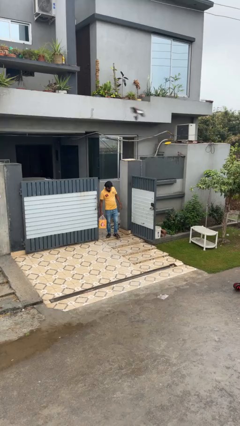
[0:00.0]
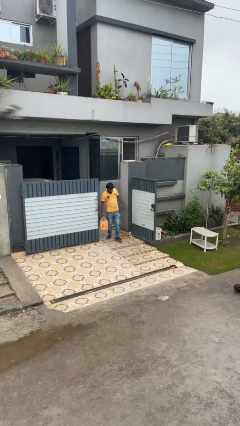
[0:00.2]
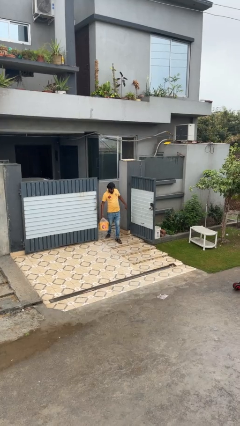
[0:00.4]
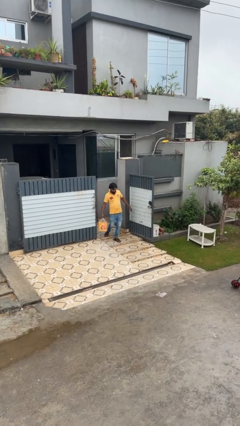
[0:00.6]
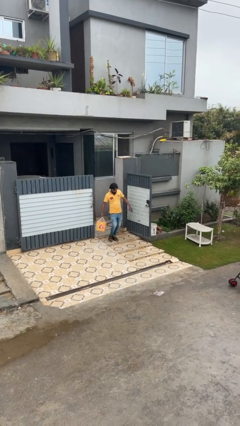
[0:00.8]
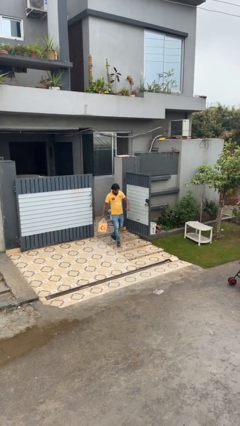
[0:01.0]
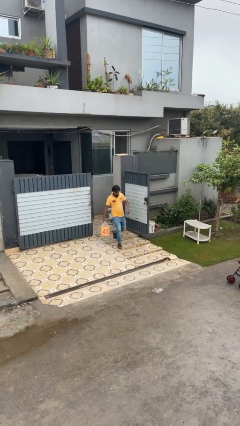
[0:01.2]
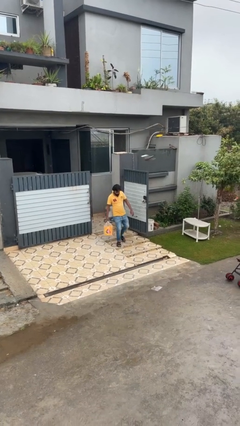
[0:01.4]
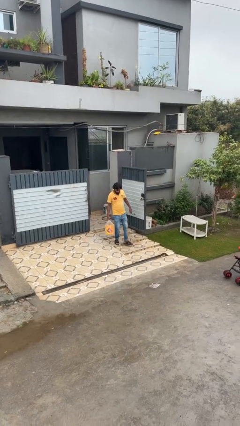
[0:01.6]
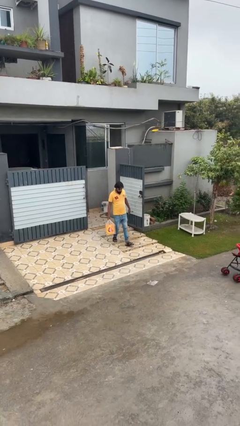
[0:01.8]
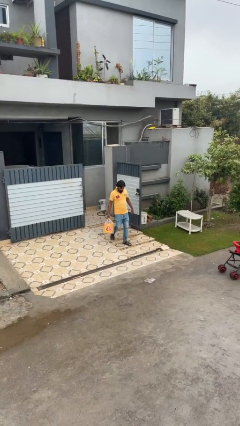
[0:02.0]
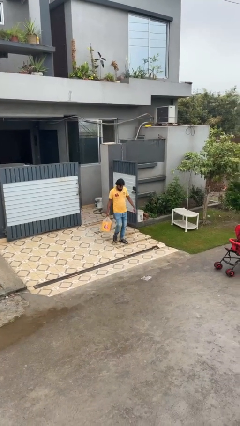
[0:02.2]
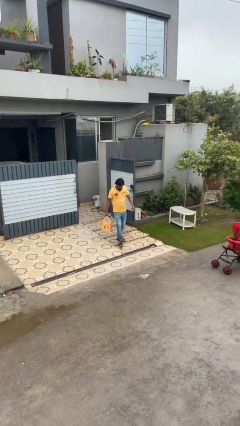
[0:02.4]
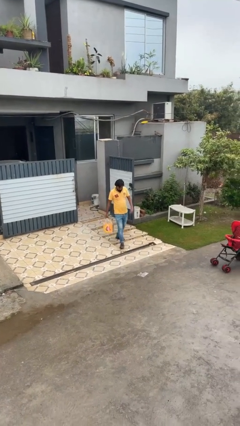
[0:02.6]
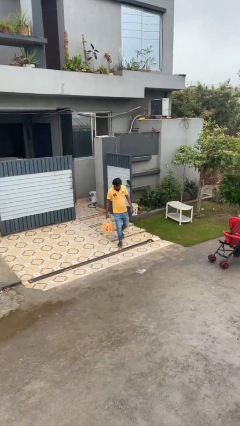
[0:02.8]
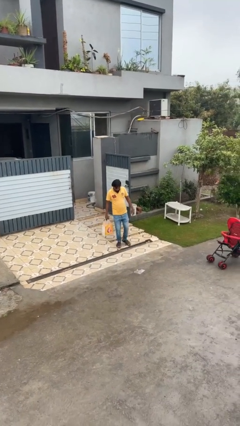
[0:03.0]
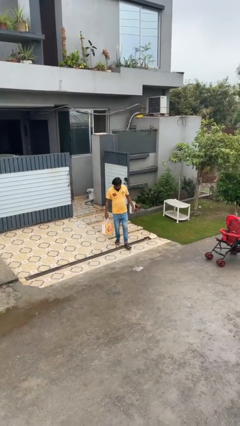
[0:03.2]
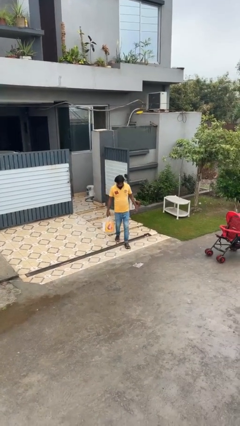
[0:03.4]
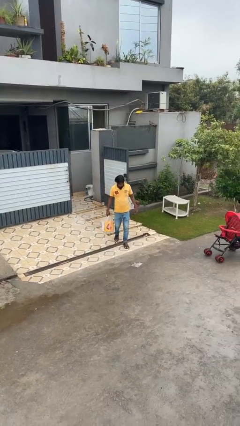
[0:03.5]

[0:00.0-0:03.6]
person carries groceries

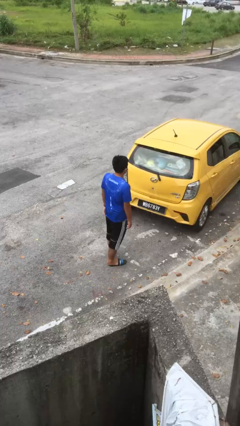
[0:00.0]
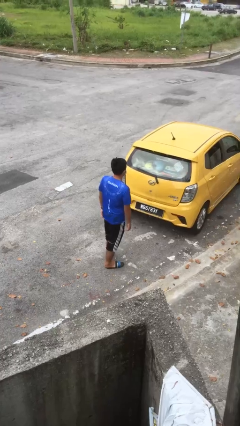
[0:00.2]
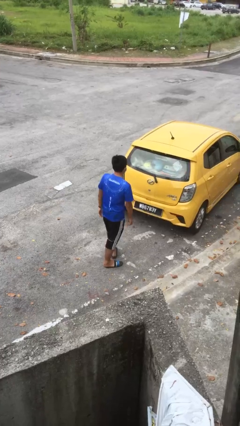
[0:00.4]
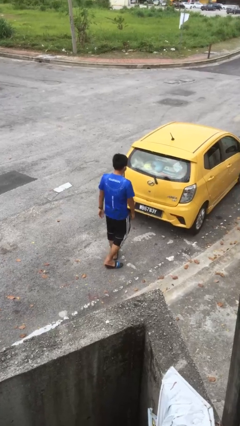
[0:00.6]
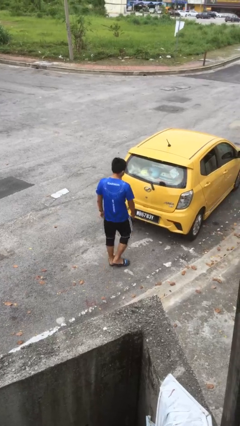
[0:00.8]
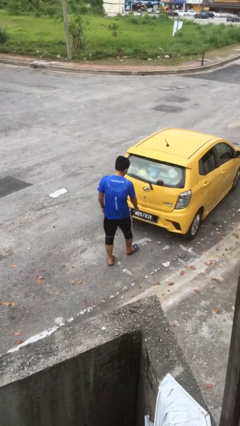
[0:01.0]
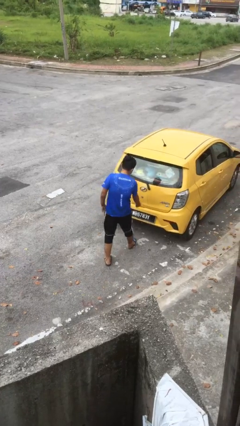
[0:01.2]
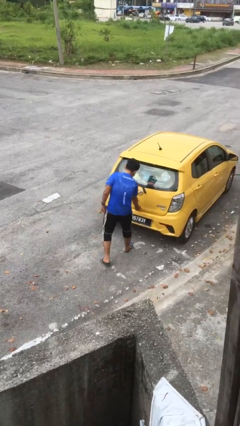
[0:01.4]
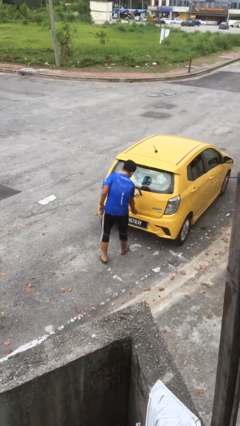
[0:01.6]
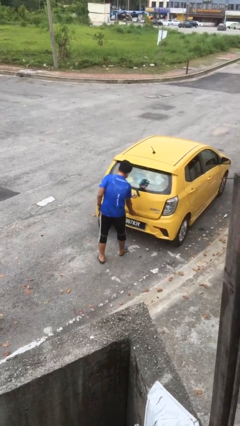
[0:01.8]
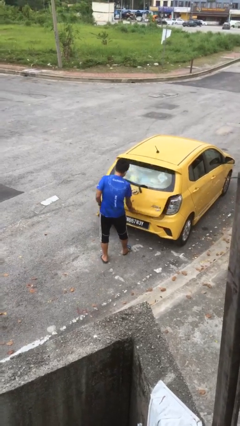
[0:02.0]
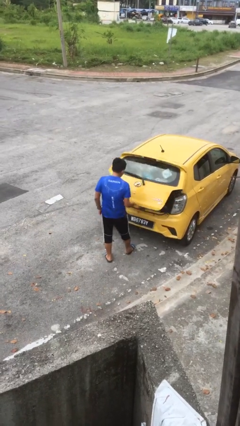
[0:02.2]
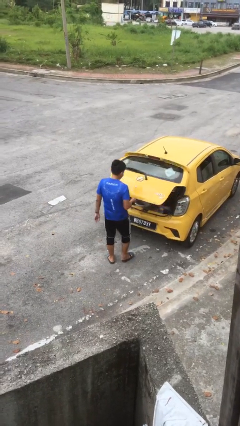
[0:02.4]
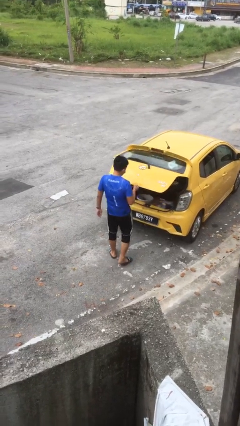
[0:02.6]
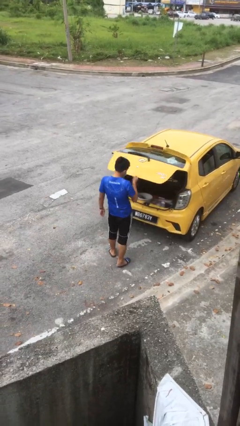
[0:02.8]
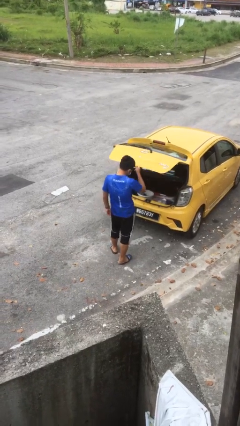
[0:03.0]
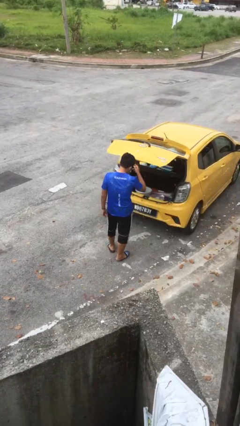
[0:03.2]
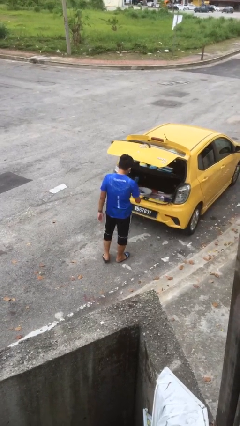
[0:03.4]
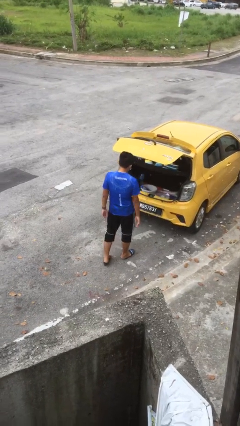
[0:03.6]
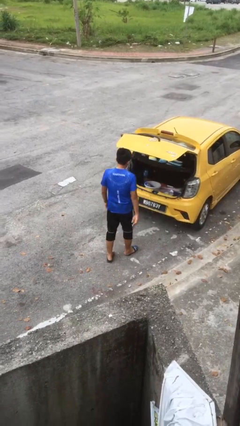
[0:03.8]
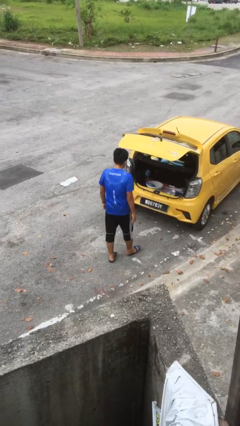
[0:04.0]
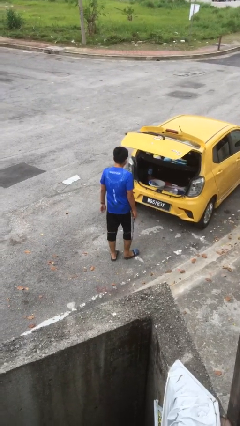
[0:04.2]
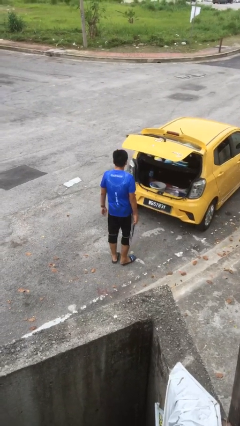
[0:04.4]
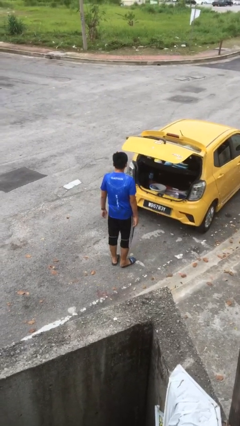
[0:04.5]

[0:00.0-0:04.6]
person opens car trunk

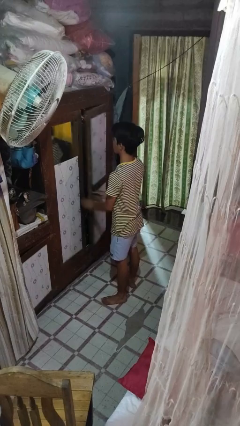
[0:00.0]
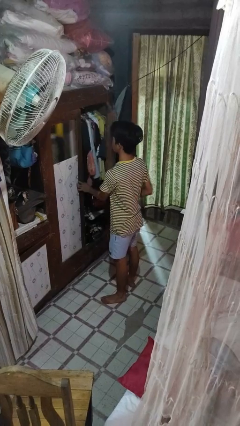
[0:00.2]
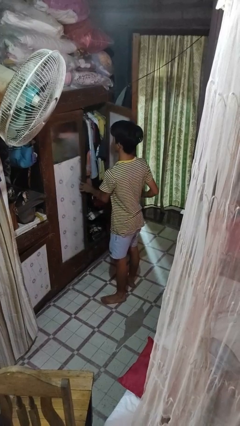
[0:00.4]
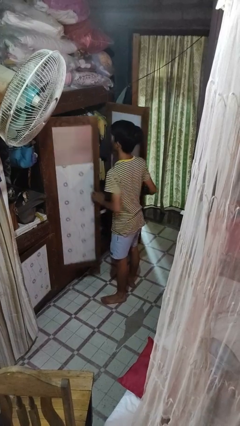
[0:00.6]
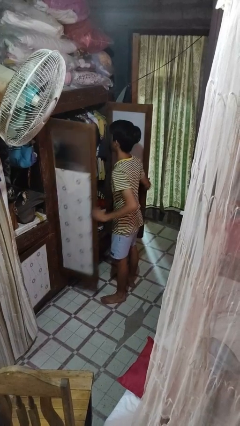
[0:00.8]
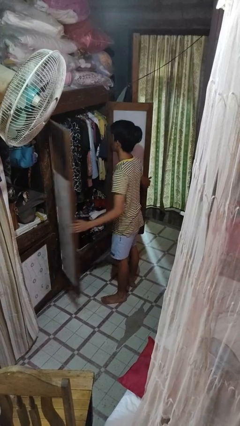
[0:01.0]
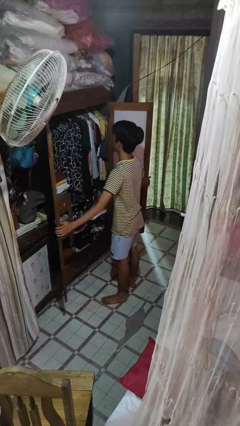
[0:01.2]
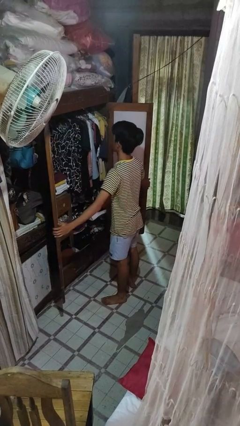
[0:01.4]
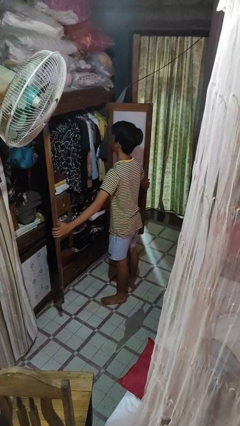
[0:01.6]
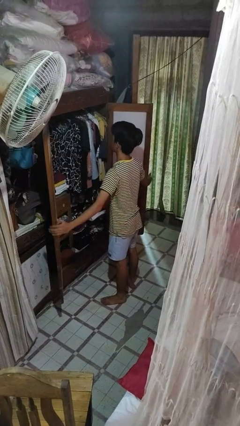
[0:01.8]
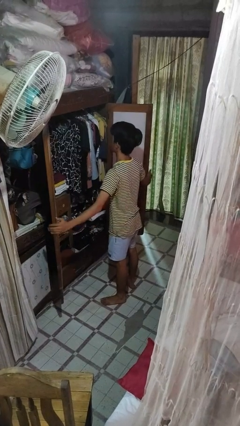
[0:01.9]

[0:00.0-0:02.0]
person opens closet door

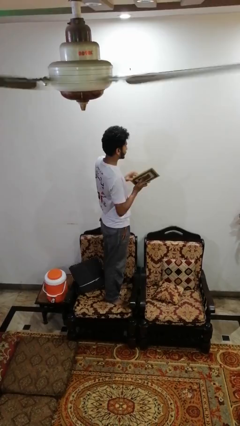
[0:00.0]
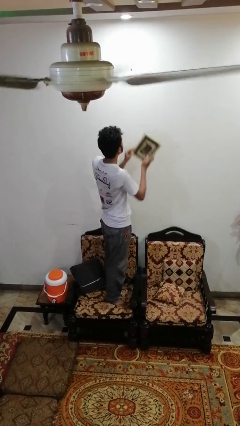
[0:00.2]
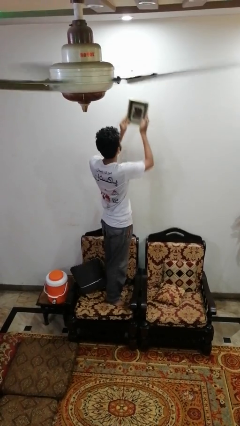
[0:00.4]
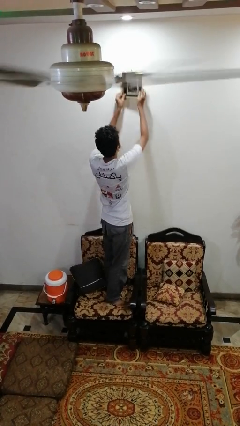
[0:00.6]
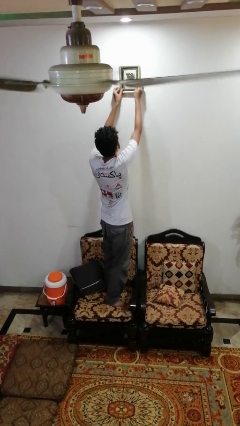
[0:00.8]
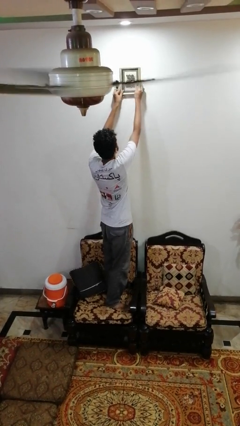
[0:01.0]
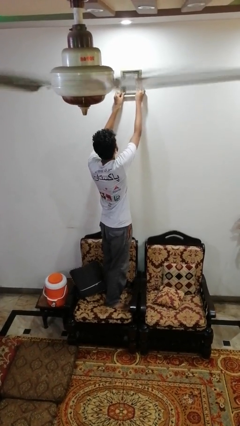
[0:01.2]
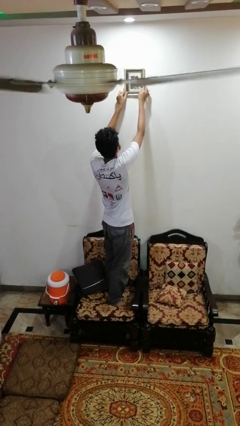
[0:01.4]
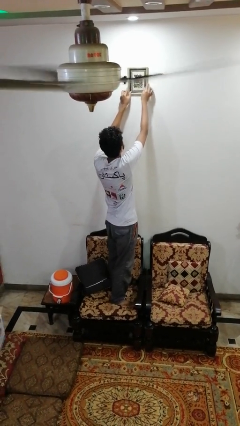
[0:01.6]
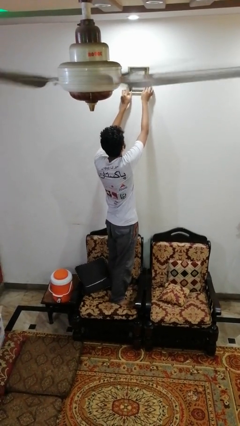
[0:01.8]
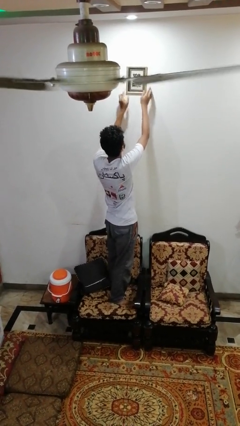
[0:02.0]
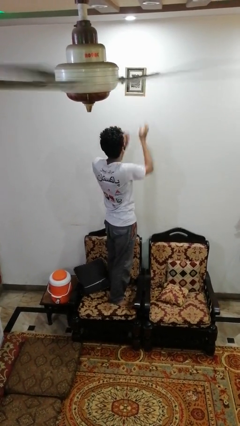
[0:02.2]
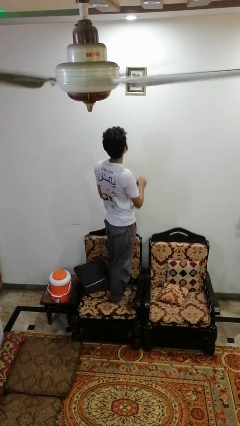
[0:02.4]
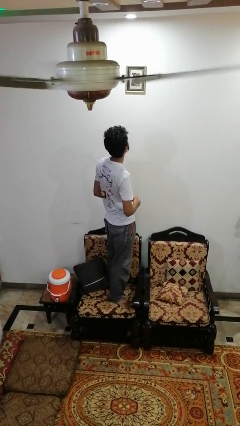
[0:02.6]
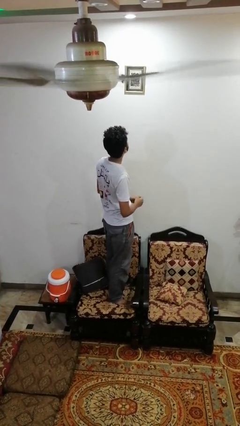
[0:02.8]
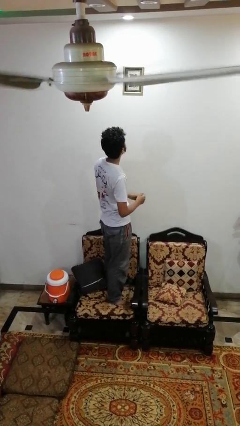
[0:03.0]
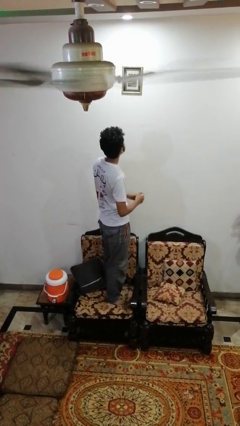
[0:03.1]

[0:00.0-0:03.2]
person puts up picture frame

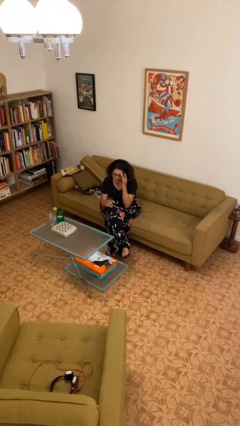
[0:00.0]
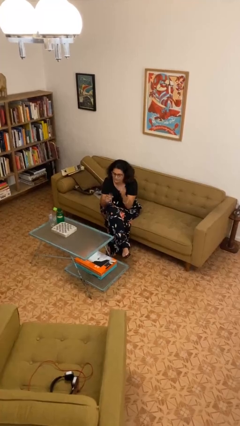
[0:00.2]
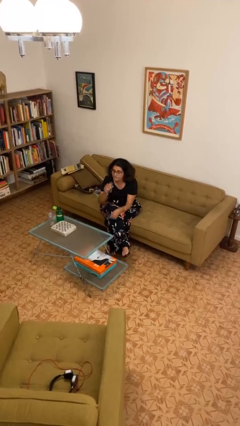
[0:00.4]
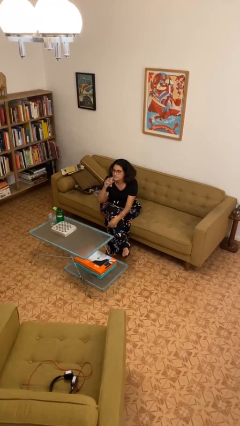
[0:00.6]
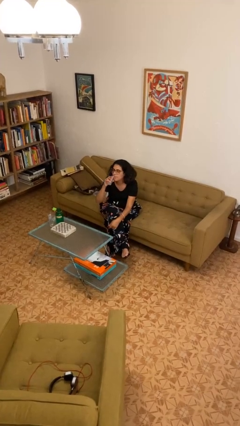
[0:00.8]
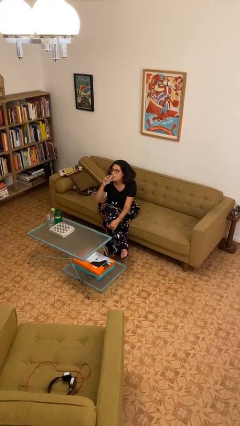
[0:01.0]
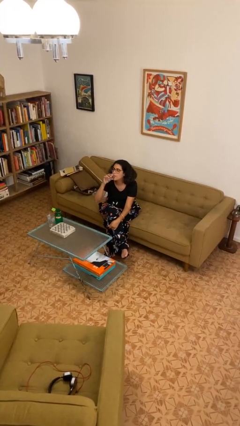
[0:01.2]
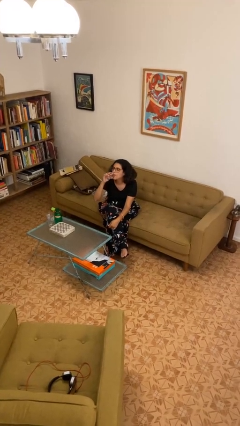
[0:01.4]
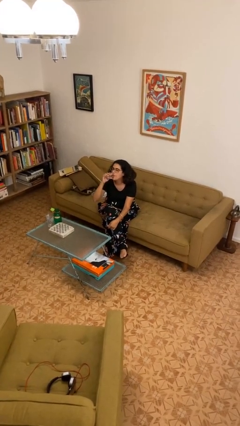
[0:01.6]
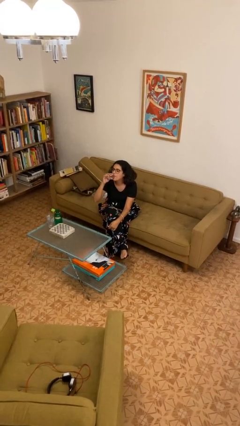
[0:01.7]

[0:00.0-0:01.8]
person drinks from shotglass

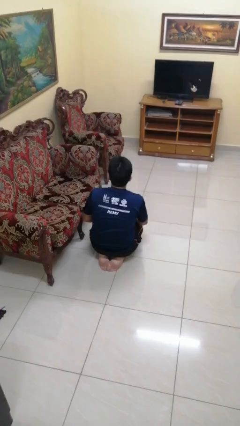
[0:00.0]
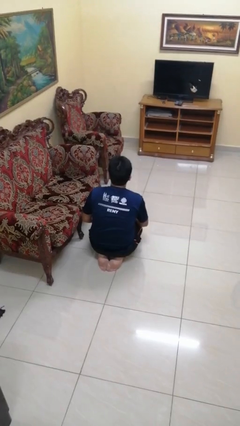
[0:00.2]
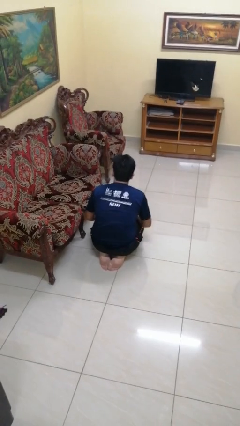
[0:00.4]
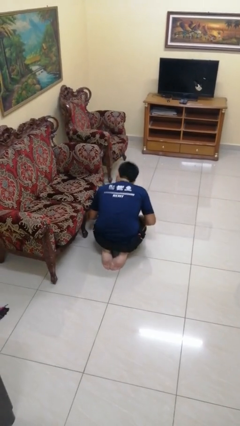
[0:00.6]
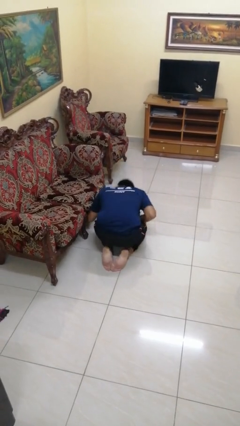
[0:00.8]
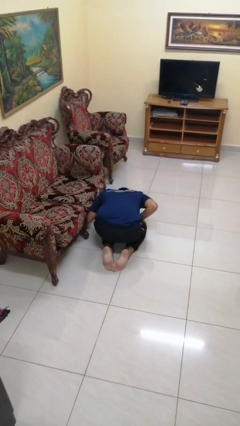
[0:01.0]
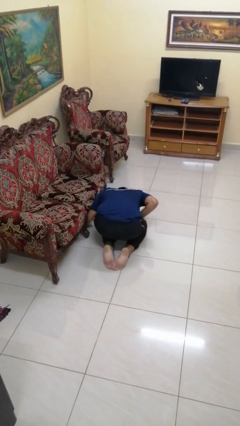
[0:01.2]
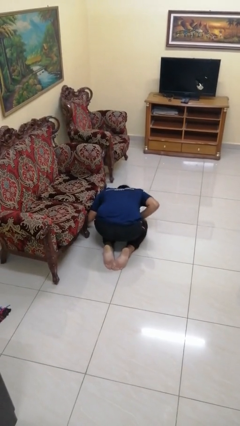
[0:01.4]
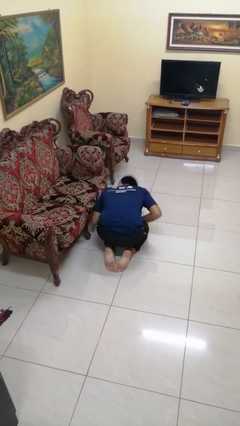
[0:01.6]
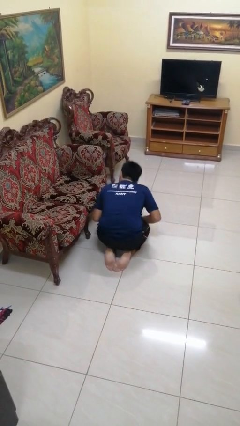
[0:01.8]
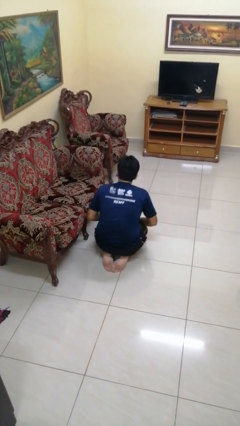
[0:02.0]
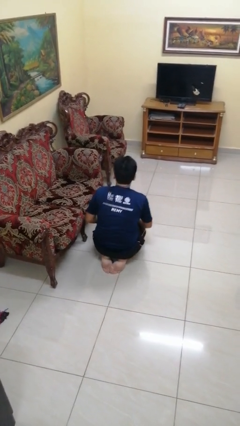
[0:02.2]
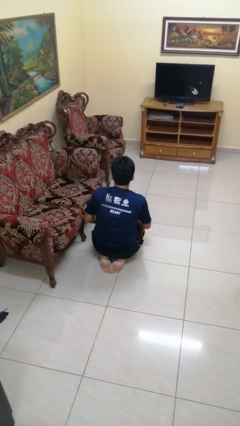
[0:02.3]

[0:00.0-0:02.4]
person searches under couch
